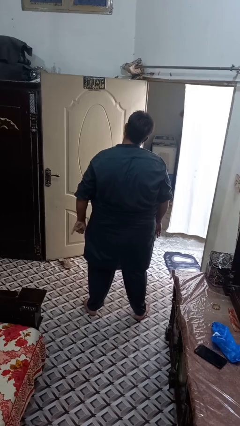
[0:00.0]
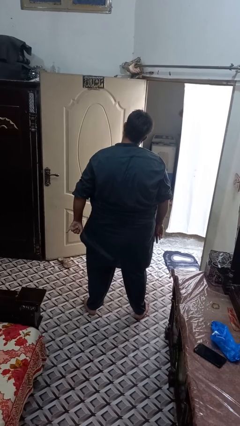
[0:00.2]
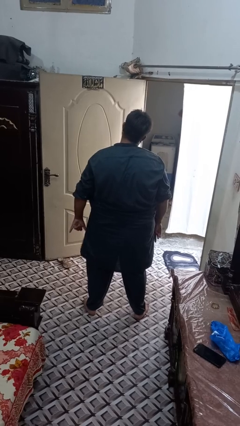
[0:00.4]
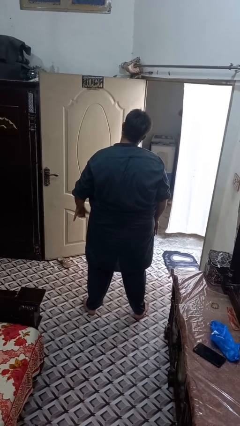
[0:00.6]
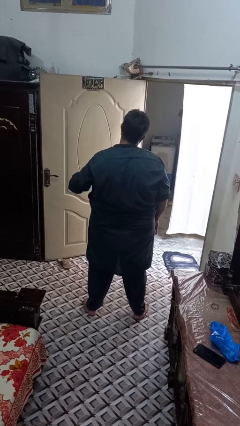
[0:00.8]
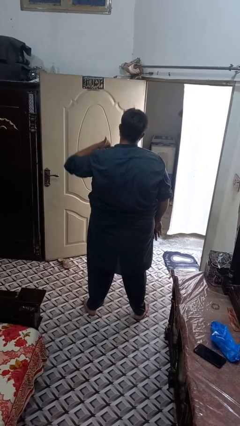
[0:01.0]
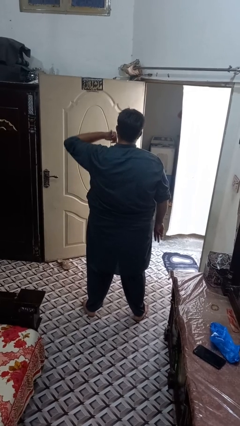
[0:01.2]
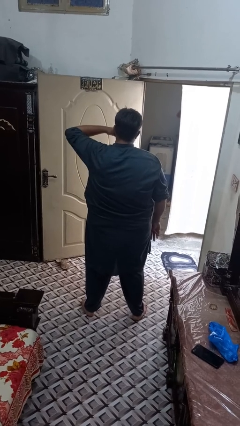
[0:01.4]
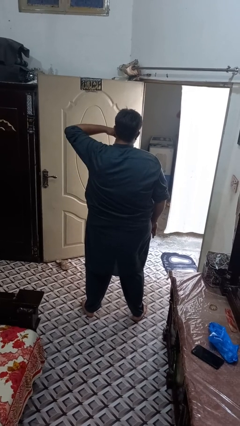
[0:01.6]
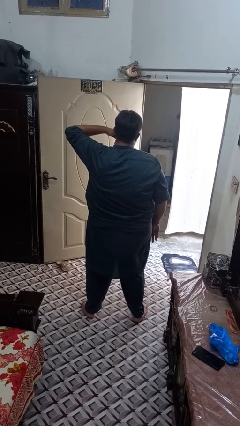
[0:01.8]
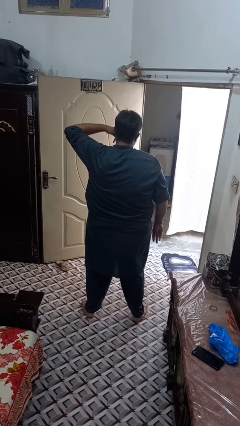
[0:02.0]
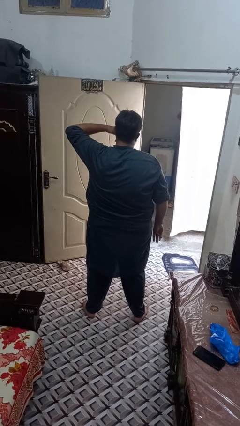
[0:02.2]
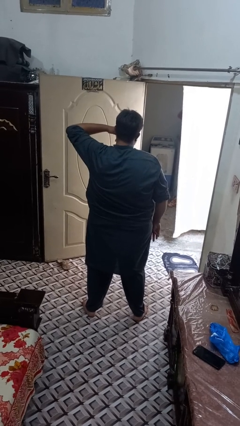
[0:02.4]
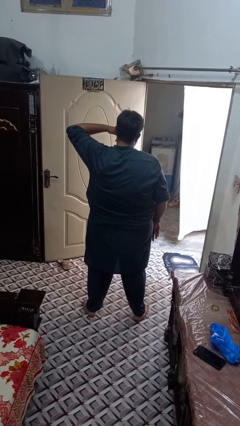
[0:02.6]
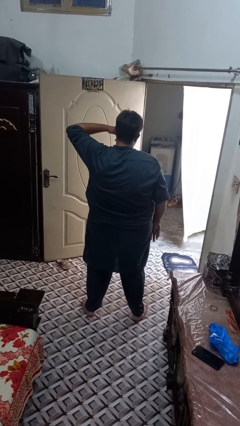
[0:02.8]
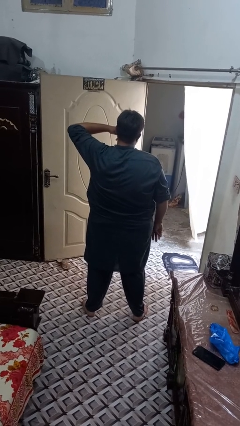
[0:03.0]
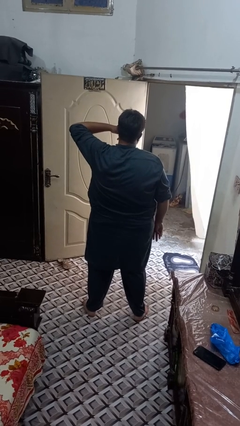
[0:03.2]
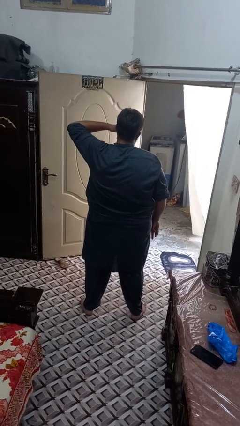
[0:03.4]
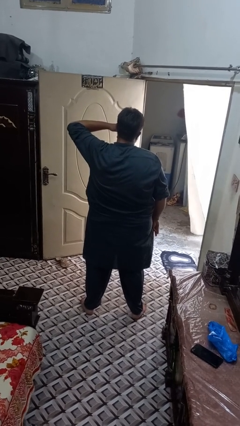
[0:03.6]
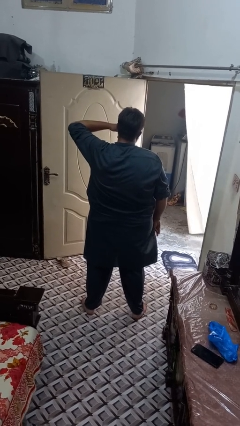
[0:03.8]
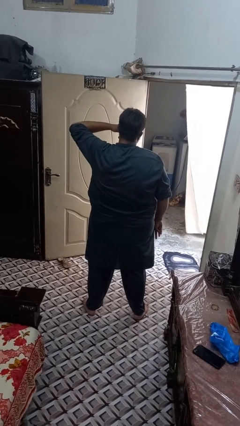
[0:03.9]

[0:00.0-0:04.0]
person gestures call me

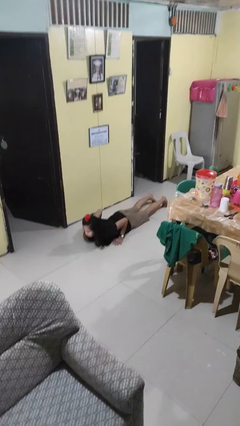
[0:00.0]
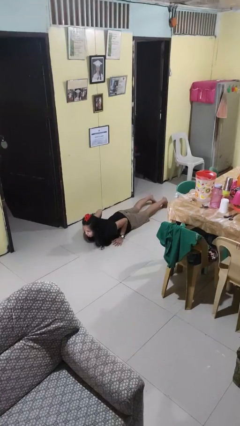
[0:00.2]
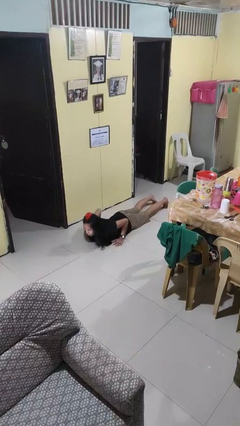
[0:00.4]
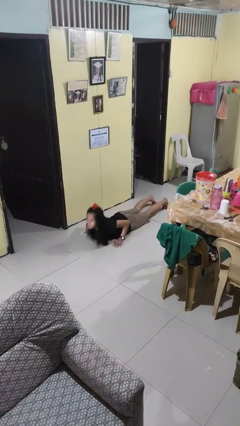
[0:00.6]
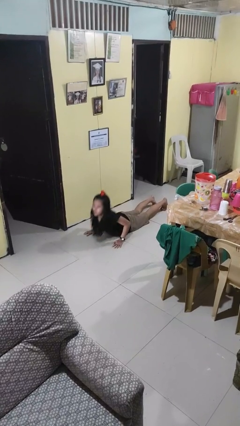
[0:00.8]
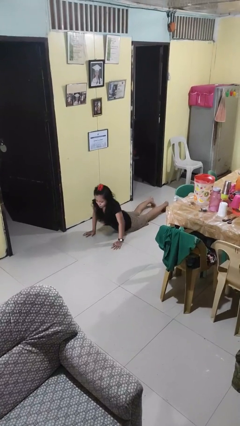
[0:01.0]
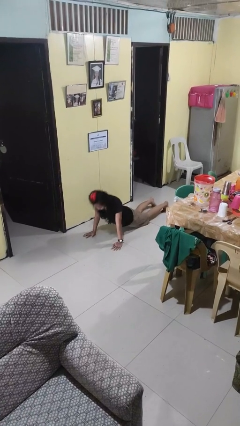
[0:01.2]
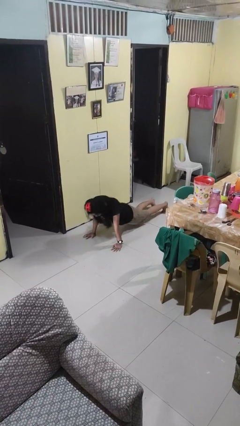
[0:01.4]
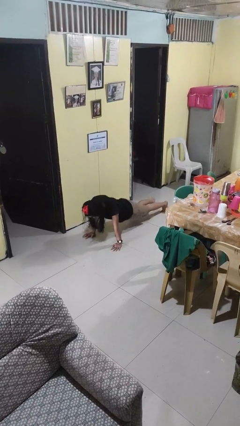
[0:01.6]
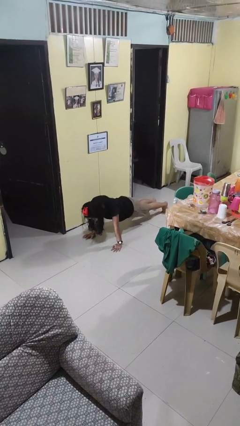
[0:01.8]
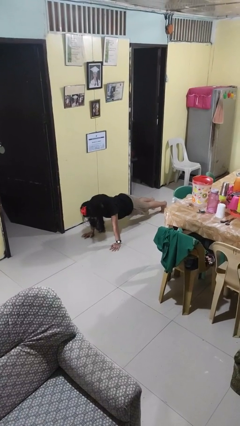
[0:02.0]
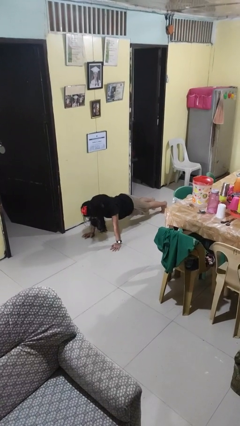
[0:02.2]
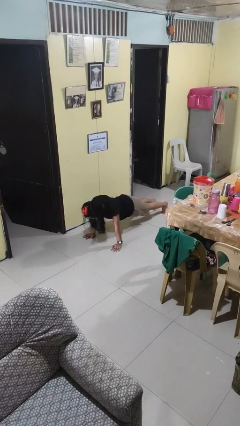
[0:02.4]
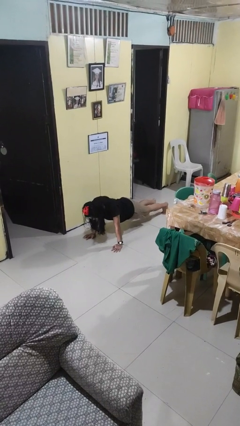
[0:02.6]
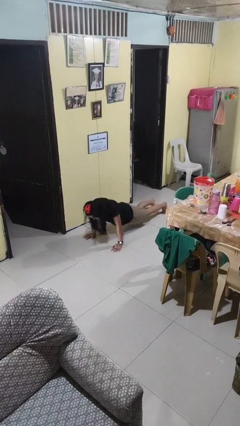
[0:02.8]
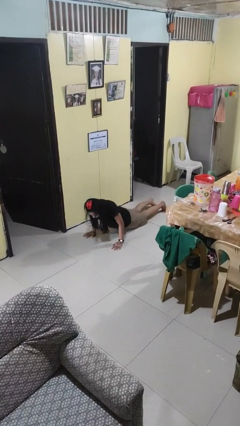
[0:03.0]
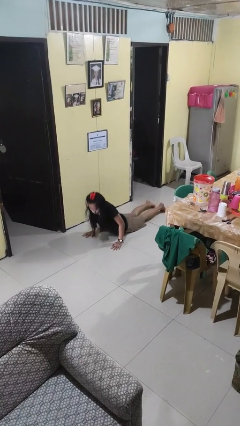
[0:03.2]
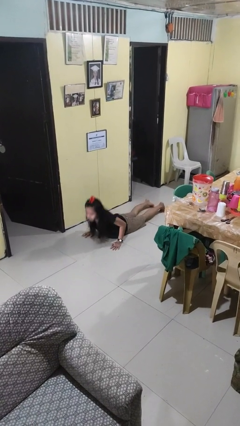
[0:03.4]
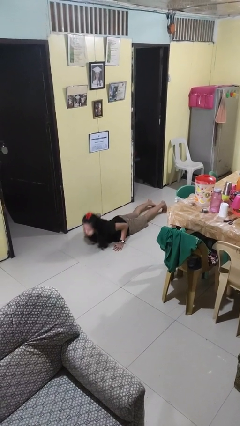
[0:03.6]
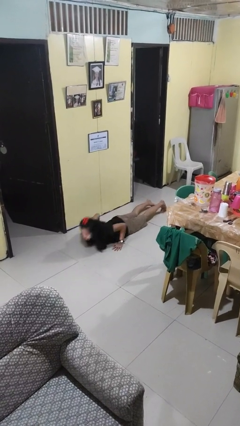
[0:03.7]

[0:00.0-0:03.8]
person exercises with pushup

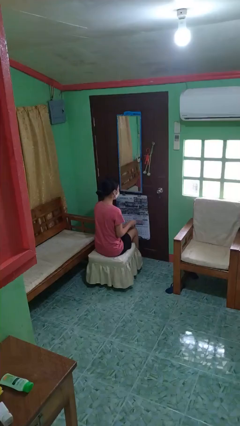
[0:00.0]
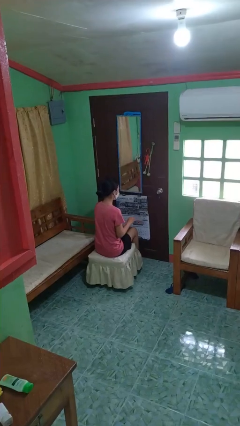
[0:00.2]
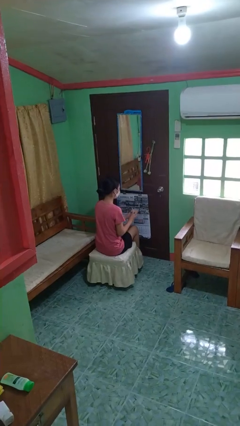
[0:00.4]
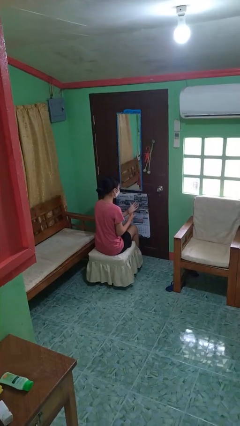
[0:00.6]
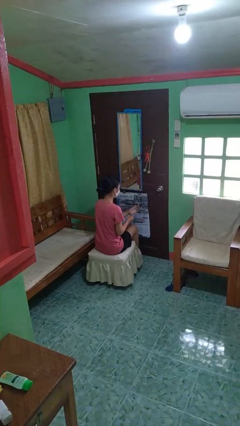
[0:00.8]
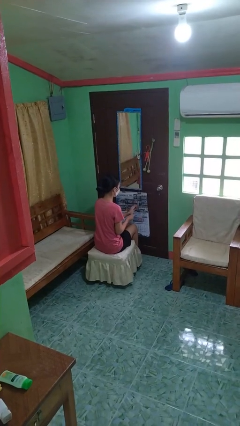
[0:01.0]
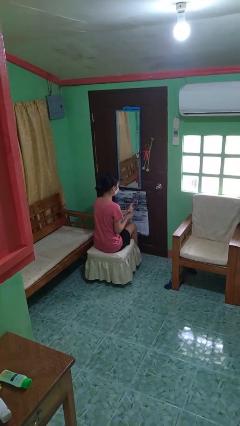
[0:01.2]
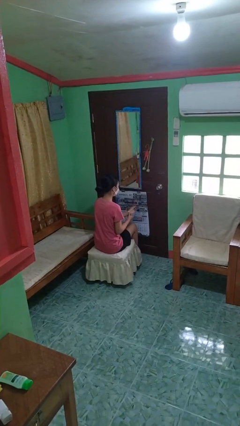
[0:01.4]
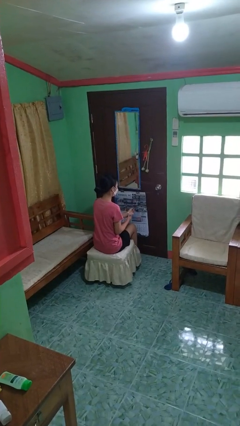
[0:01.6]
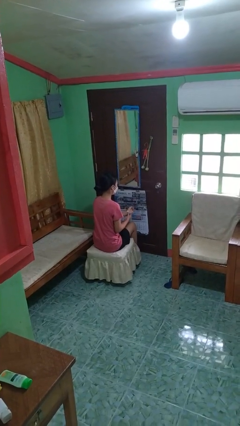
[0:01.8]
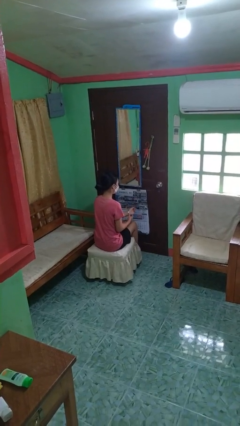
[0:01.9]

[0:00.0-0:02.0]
person puts on wristwatch

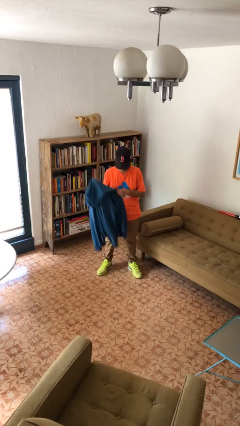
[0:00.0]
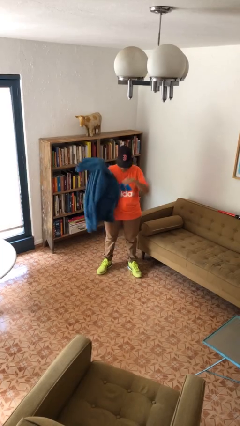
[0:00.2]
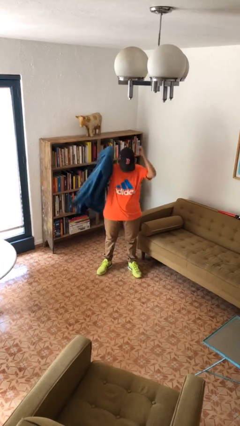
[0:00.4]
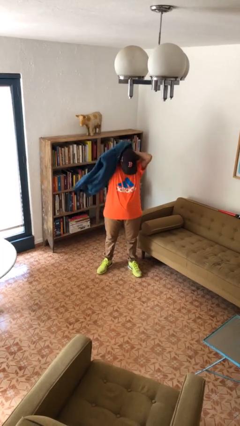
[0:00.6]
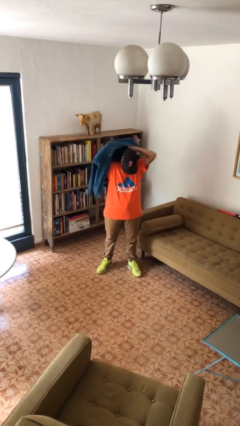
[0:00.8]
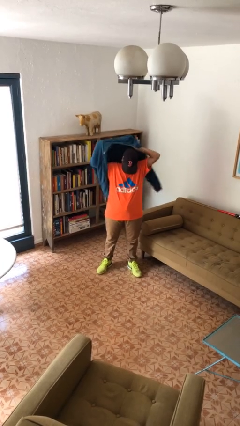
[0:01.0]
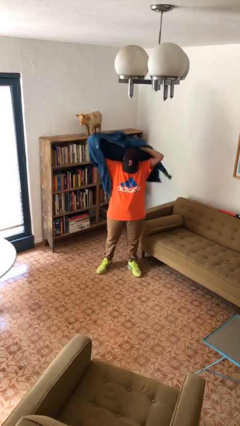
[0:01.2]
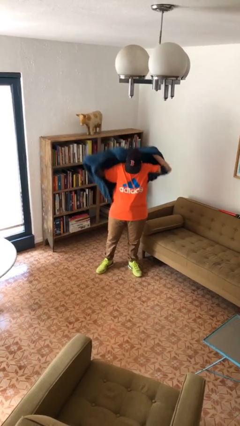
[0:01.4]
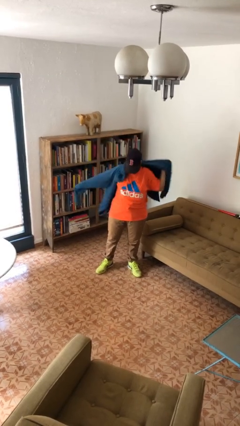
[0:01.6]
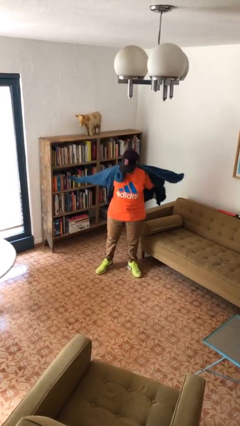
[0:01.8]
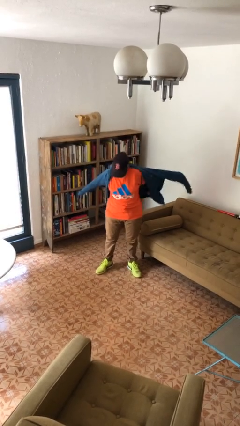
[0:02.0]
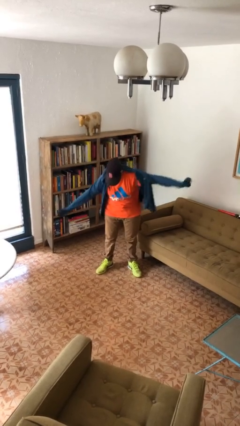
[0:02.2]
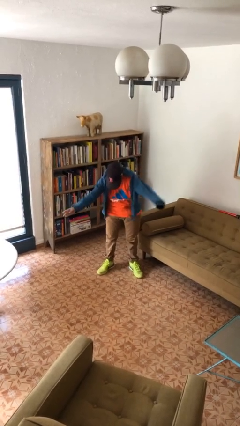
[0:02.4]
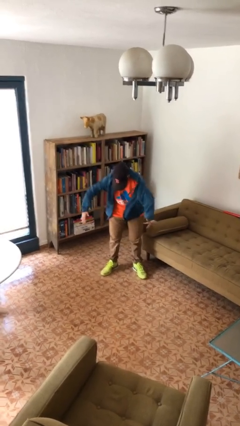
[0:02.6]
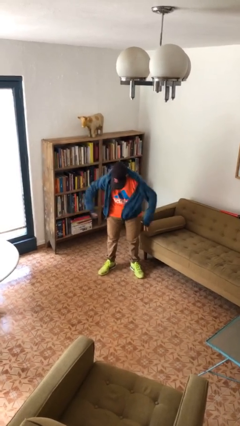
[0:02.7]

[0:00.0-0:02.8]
person puts on jacket

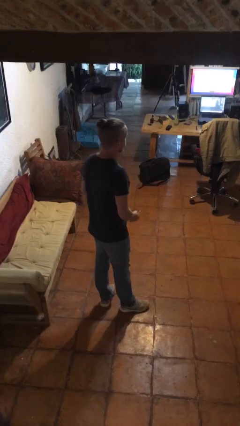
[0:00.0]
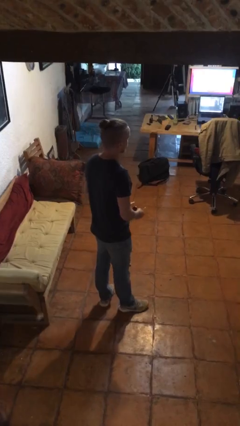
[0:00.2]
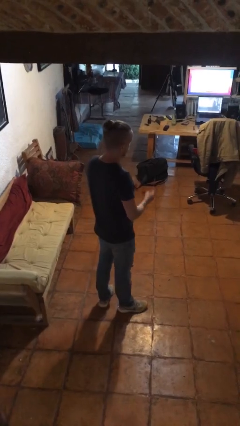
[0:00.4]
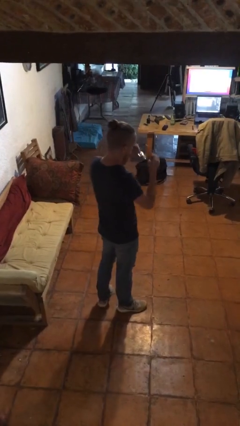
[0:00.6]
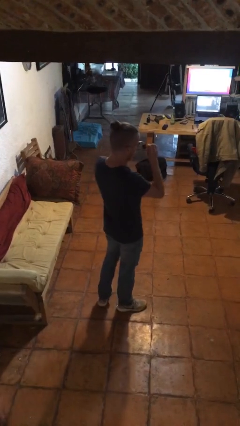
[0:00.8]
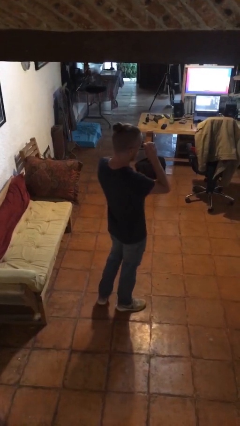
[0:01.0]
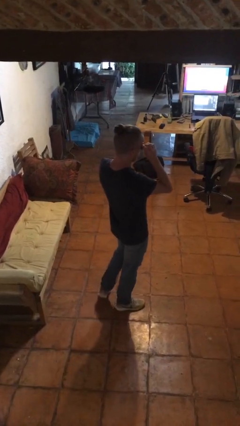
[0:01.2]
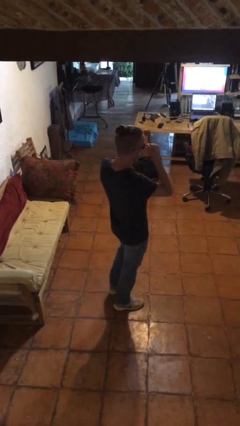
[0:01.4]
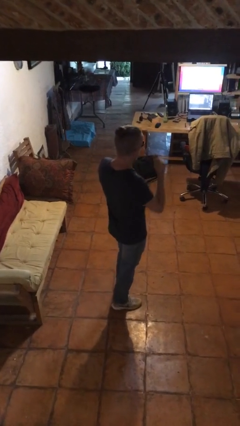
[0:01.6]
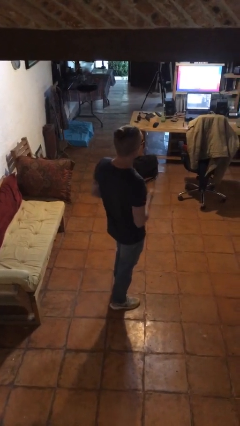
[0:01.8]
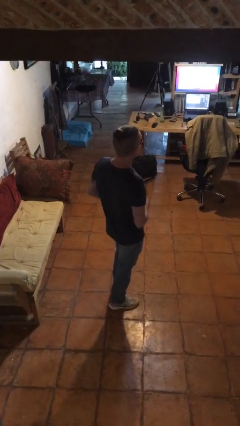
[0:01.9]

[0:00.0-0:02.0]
person puts on sunglasses

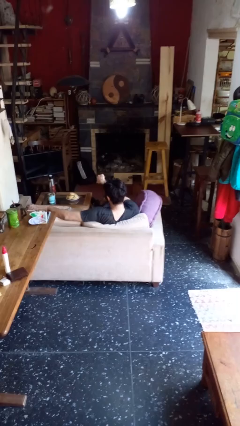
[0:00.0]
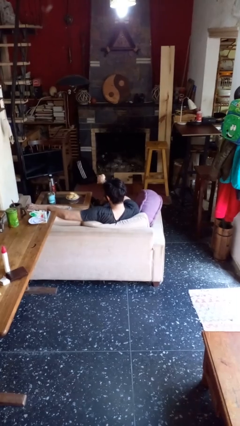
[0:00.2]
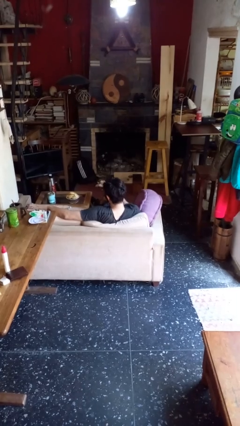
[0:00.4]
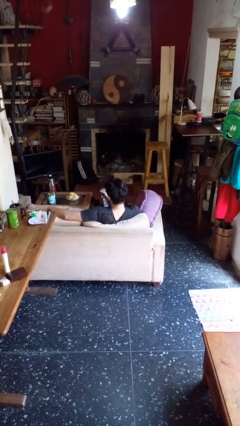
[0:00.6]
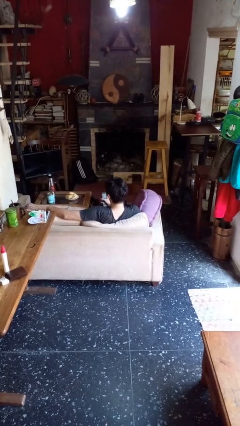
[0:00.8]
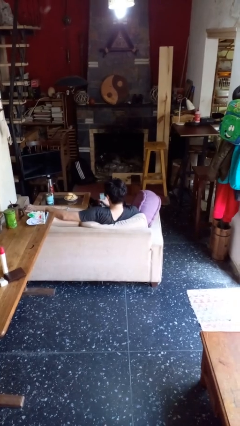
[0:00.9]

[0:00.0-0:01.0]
person uses television remote

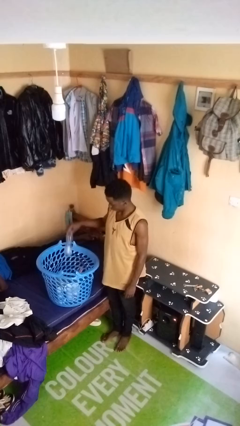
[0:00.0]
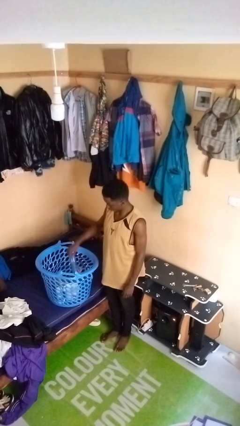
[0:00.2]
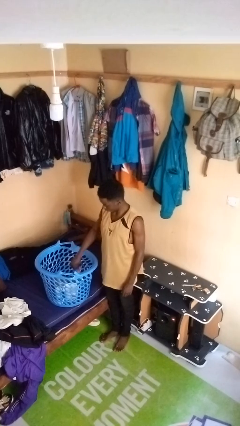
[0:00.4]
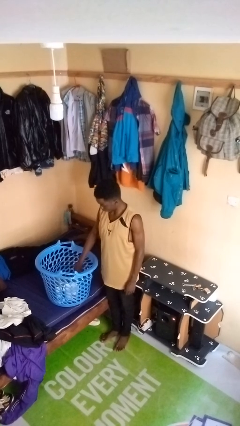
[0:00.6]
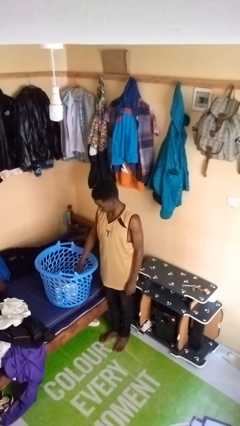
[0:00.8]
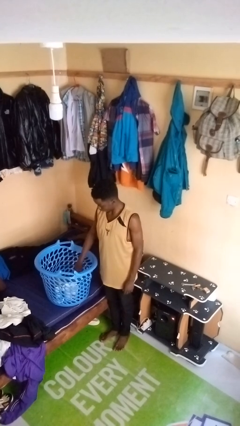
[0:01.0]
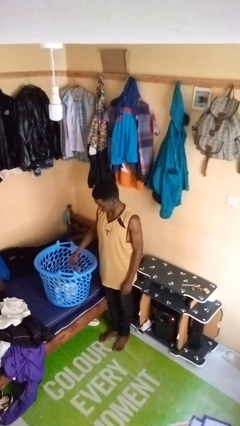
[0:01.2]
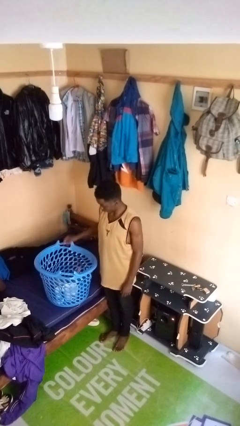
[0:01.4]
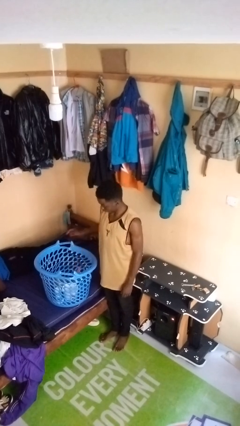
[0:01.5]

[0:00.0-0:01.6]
person puts object into basket
